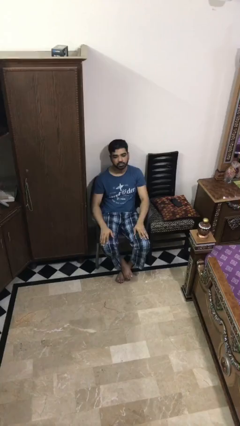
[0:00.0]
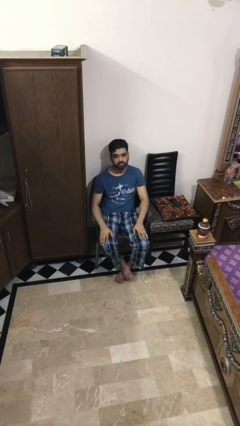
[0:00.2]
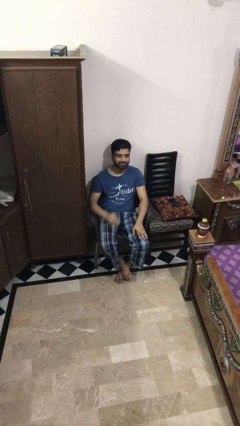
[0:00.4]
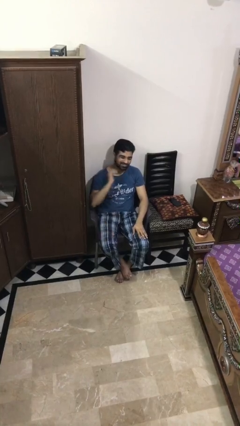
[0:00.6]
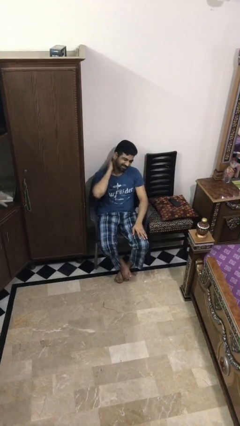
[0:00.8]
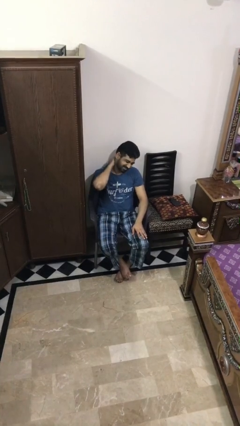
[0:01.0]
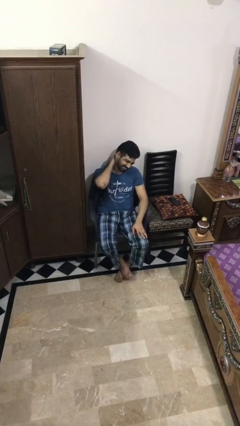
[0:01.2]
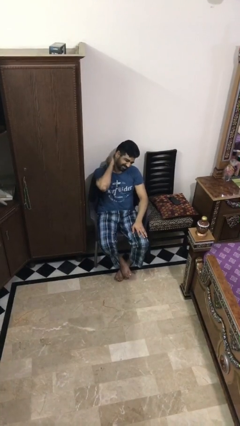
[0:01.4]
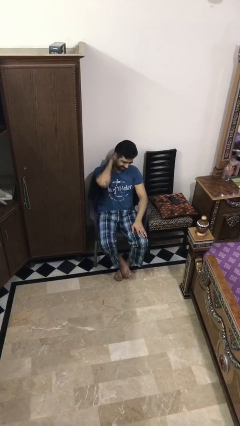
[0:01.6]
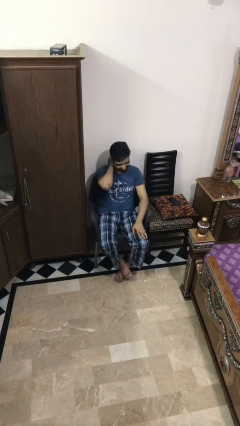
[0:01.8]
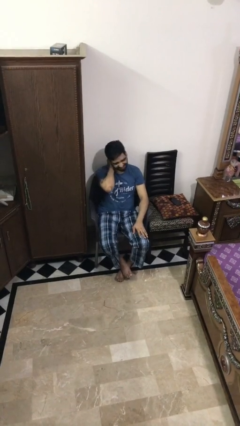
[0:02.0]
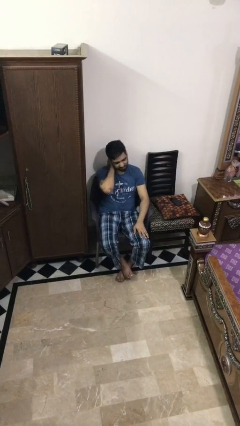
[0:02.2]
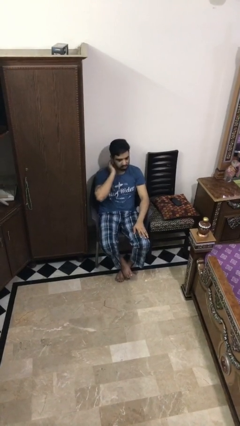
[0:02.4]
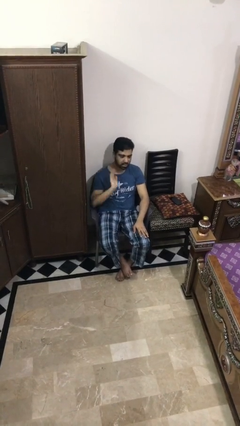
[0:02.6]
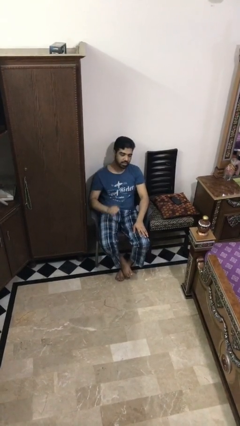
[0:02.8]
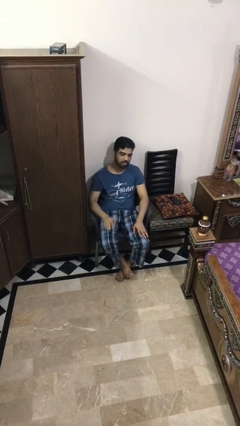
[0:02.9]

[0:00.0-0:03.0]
person rubs neck

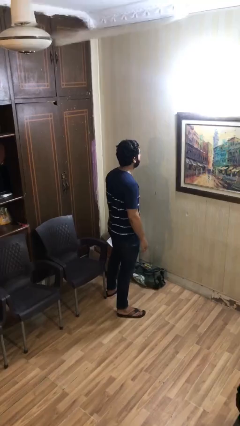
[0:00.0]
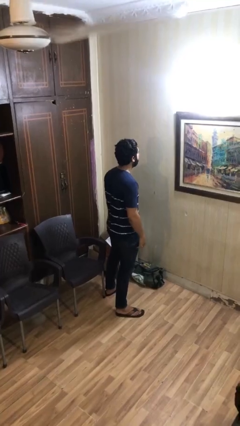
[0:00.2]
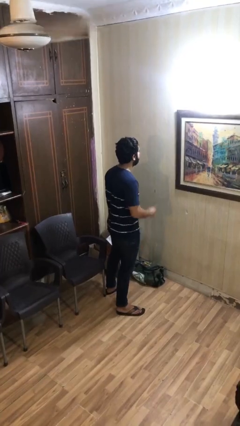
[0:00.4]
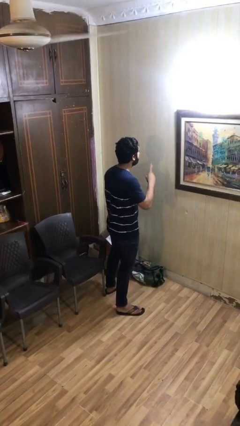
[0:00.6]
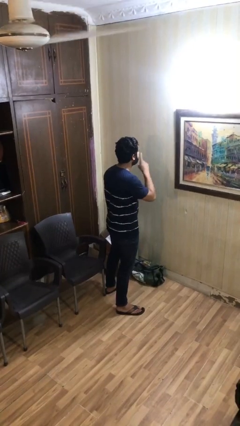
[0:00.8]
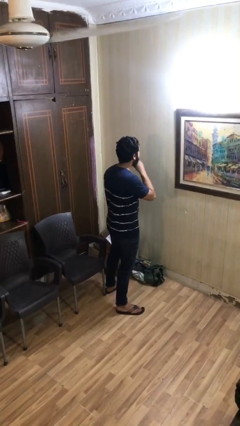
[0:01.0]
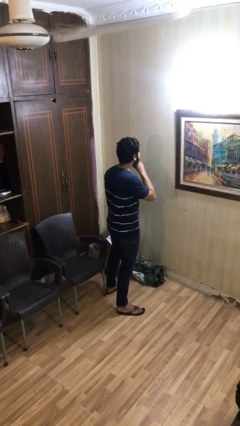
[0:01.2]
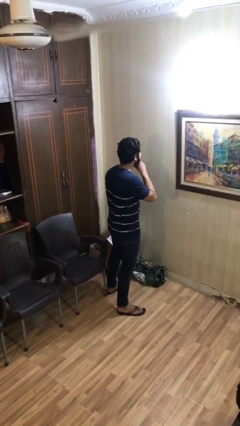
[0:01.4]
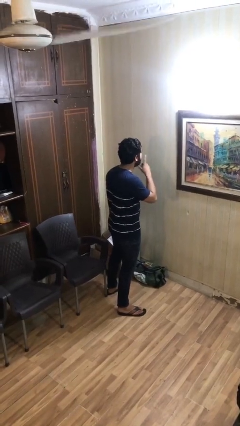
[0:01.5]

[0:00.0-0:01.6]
person gestures be quiet

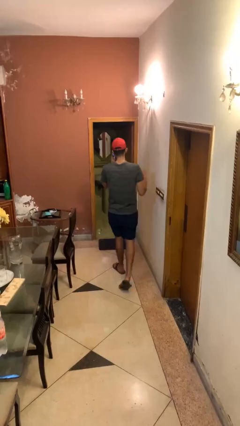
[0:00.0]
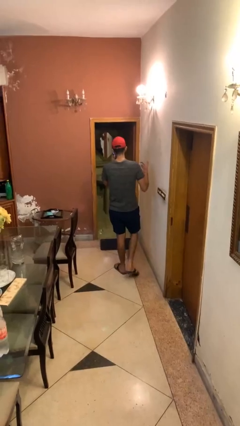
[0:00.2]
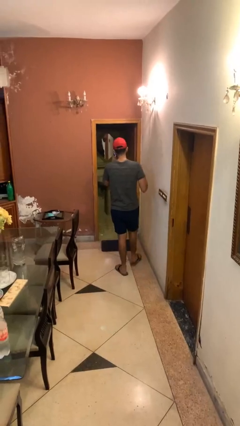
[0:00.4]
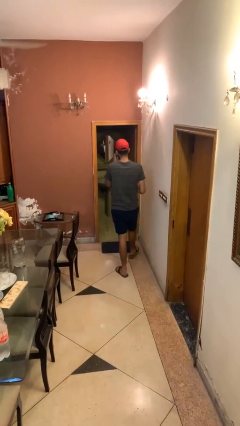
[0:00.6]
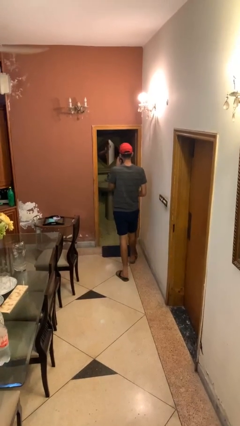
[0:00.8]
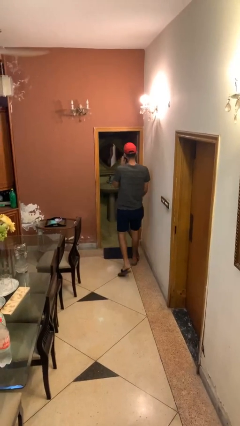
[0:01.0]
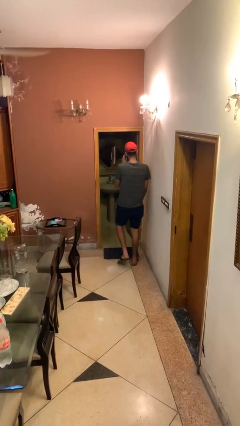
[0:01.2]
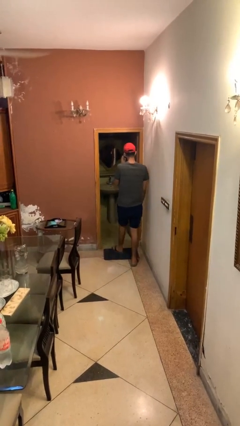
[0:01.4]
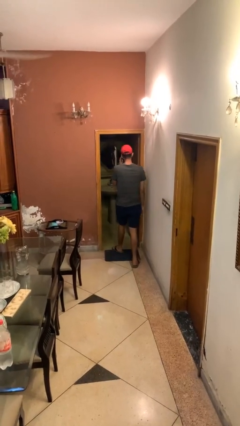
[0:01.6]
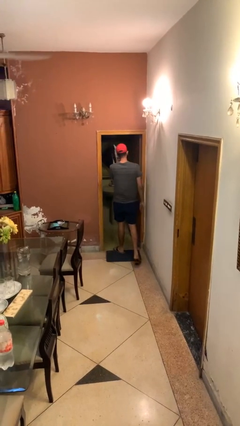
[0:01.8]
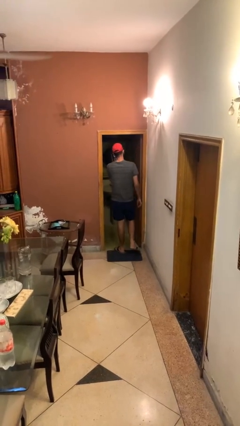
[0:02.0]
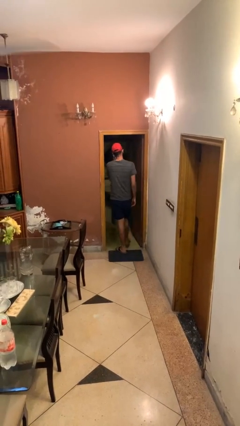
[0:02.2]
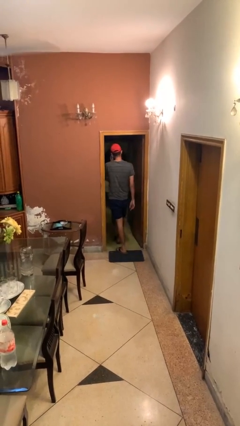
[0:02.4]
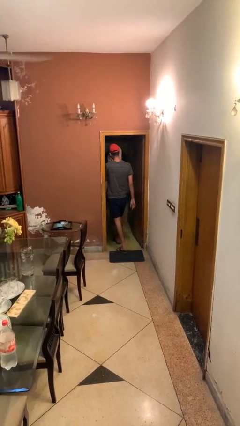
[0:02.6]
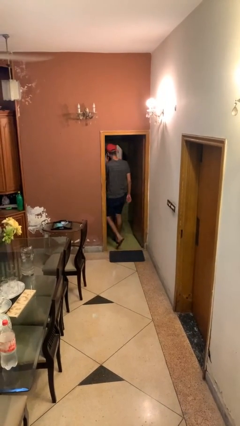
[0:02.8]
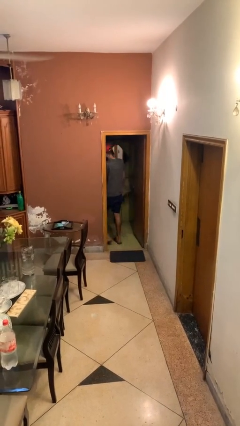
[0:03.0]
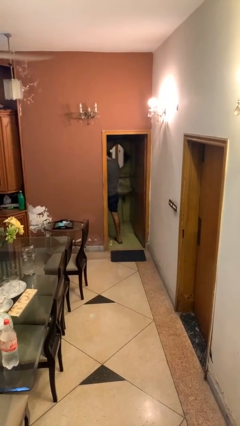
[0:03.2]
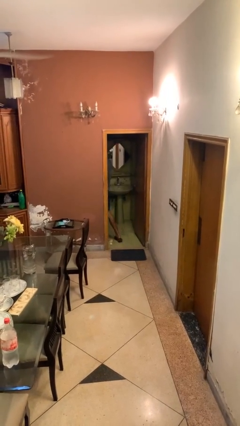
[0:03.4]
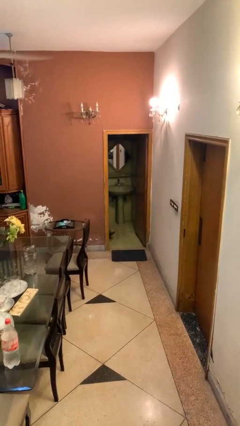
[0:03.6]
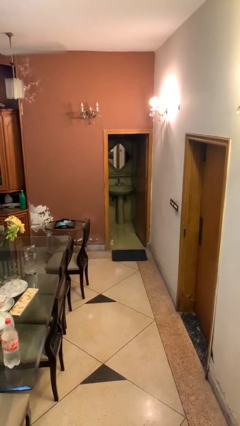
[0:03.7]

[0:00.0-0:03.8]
person exits scene through structure

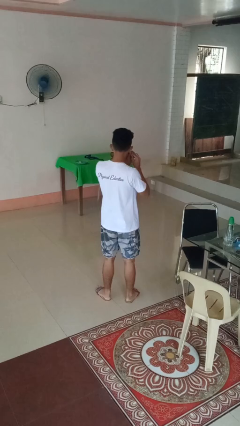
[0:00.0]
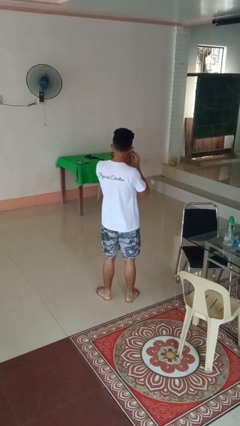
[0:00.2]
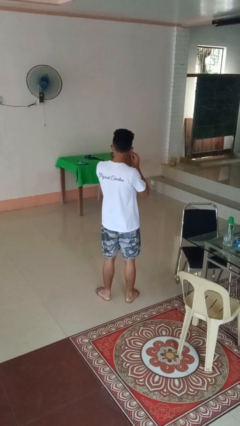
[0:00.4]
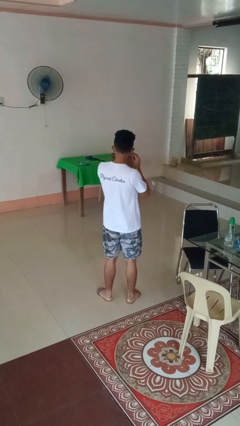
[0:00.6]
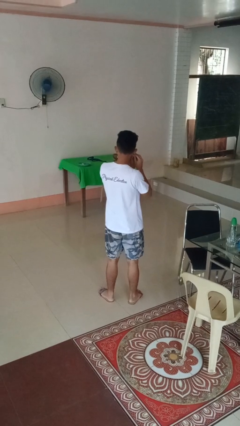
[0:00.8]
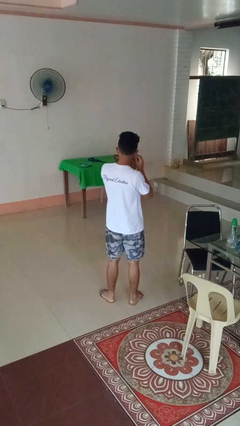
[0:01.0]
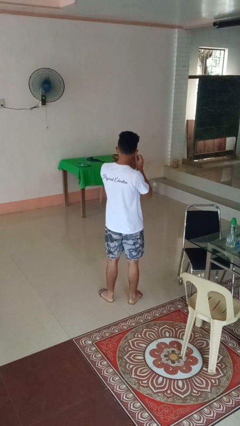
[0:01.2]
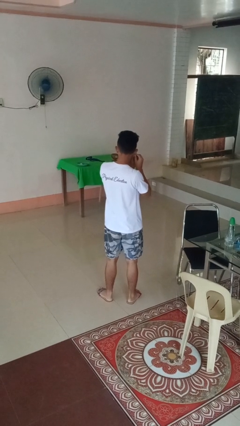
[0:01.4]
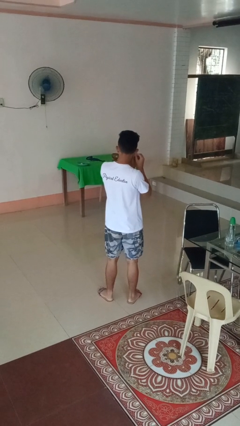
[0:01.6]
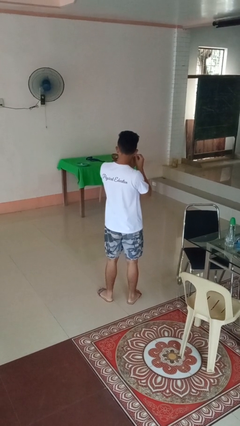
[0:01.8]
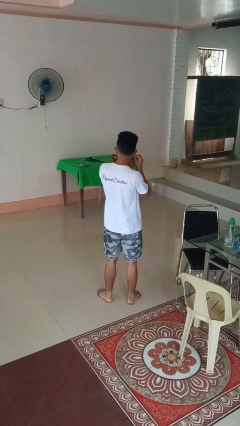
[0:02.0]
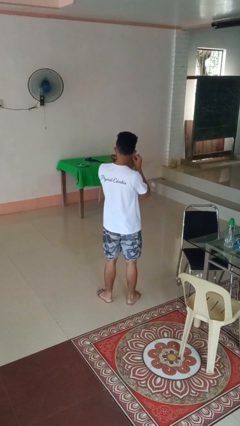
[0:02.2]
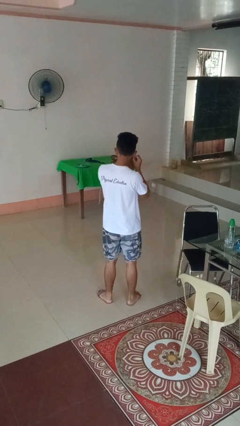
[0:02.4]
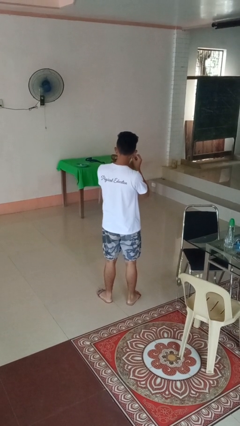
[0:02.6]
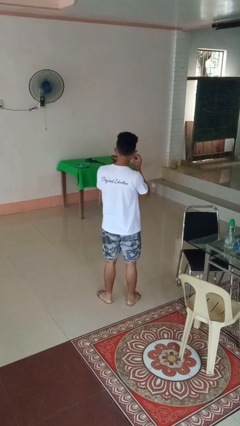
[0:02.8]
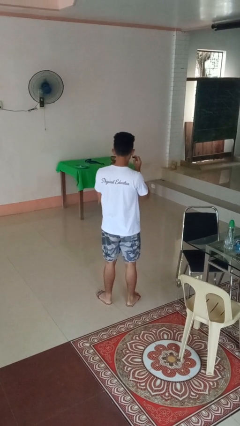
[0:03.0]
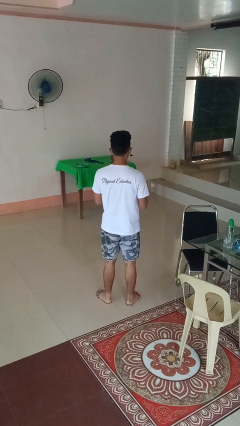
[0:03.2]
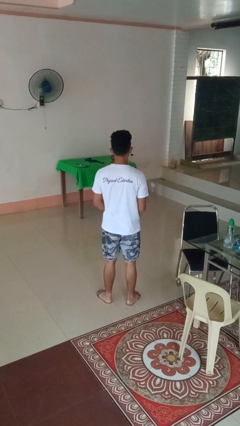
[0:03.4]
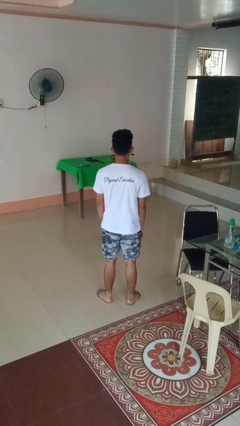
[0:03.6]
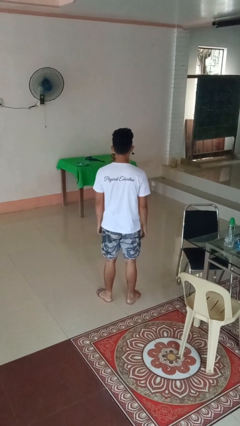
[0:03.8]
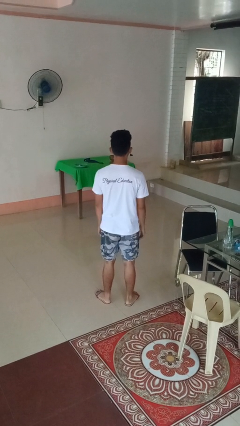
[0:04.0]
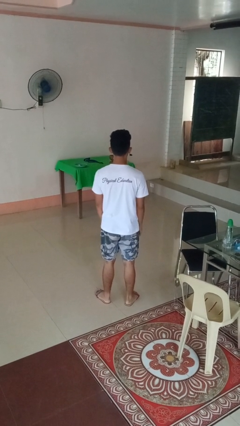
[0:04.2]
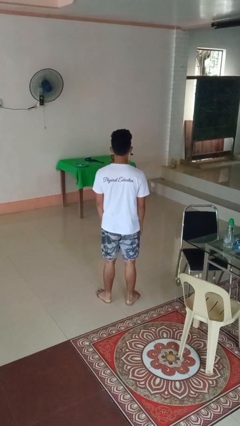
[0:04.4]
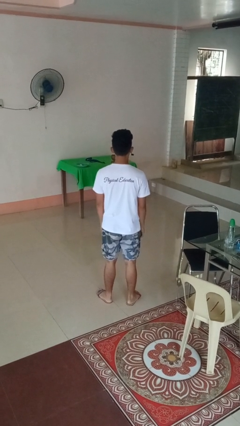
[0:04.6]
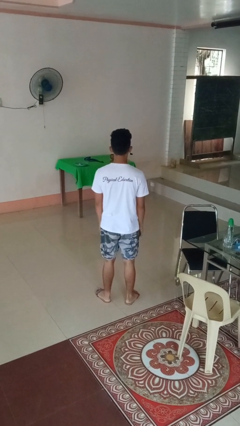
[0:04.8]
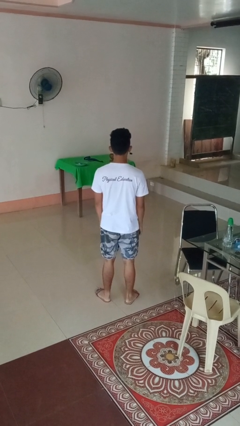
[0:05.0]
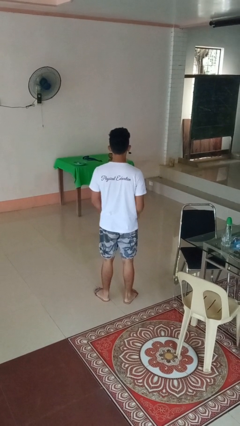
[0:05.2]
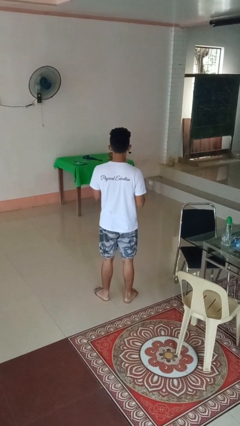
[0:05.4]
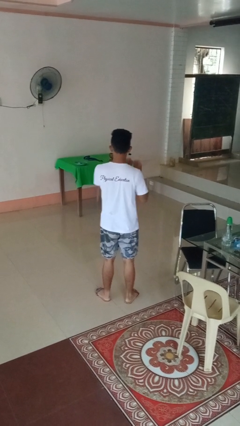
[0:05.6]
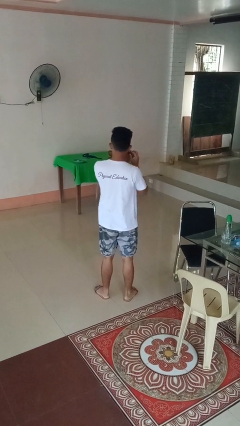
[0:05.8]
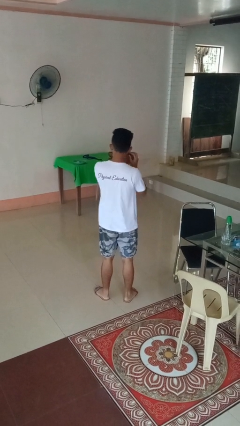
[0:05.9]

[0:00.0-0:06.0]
person puts on earrings

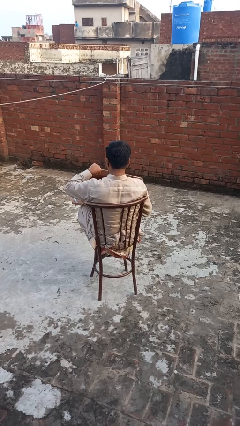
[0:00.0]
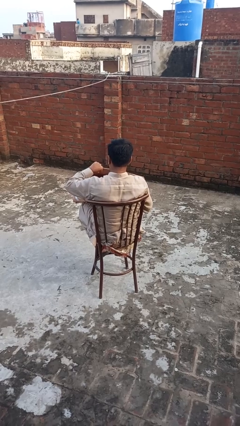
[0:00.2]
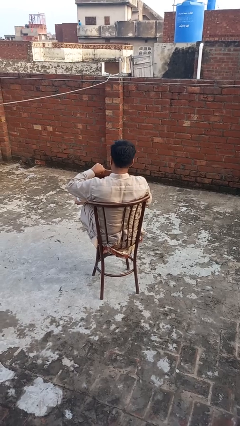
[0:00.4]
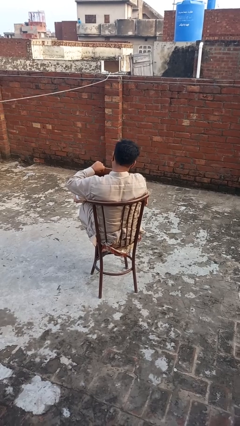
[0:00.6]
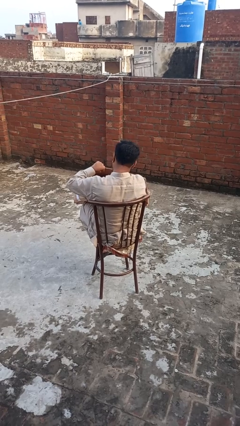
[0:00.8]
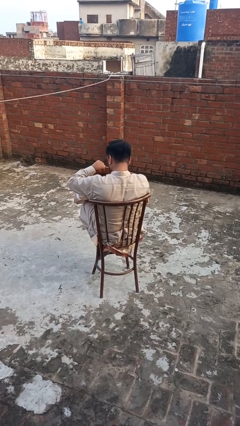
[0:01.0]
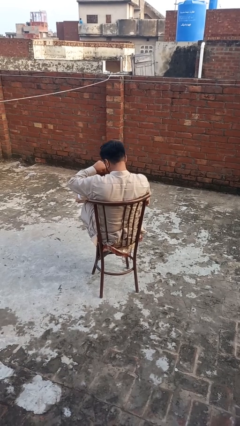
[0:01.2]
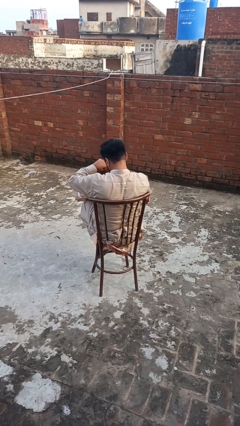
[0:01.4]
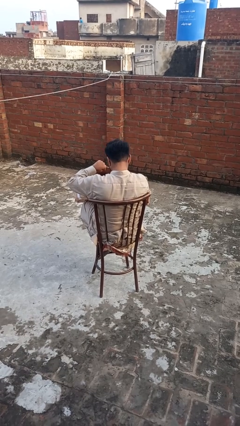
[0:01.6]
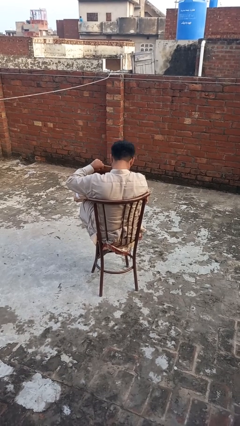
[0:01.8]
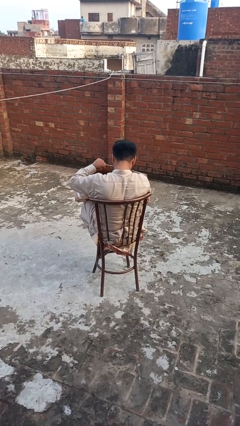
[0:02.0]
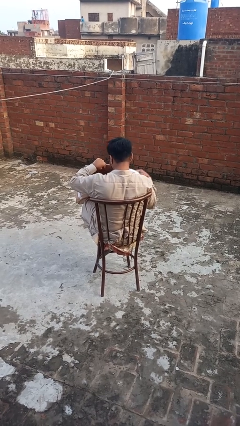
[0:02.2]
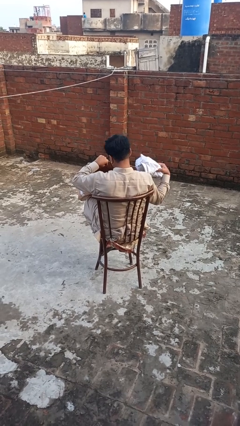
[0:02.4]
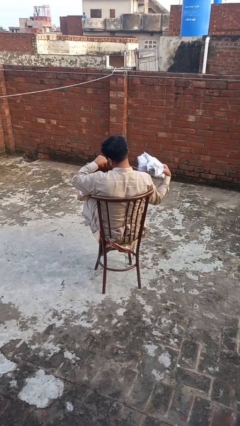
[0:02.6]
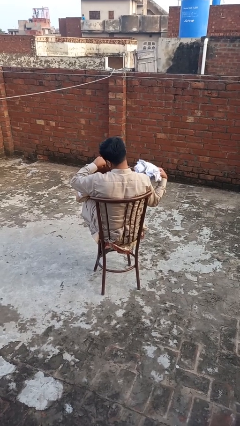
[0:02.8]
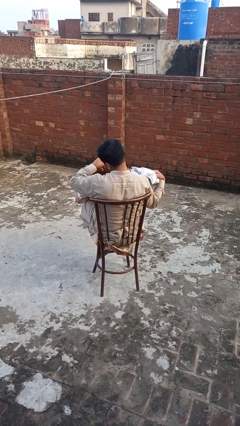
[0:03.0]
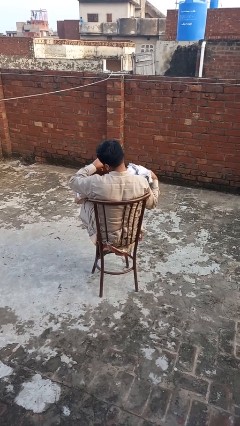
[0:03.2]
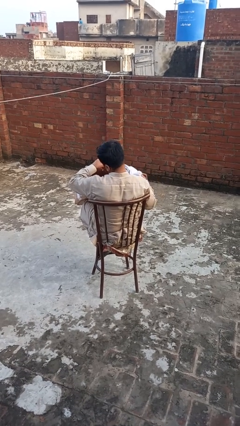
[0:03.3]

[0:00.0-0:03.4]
person searches in box
